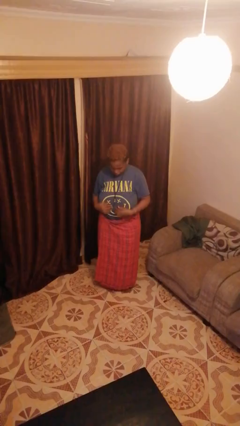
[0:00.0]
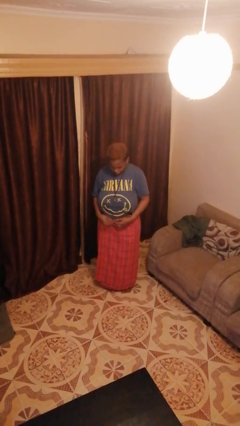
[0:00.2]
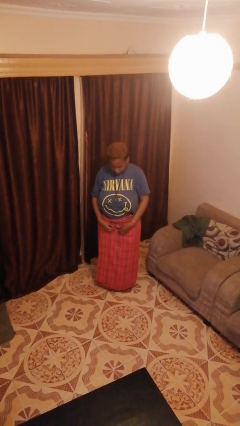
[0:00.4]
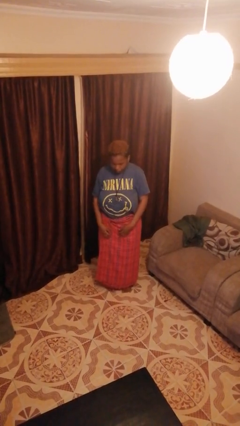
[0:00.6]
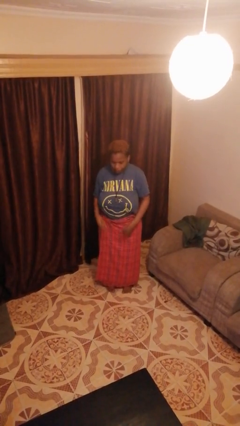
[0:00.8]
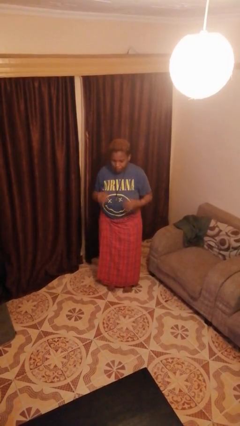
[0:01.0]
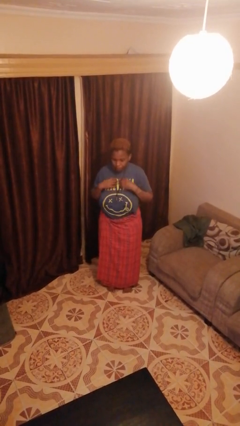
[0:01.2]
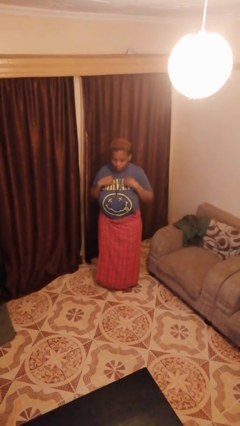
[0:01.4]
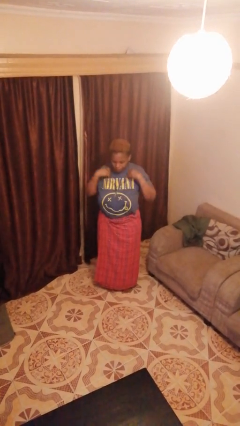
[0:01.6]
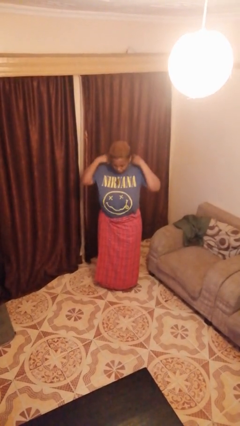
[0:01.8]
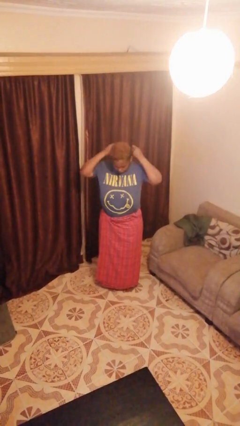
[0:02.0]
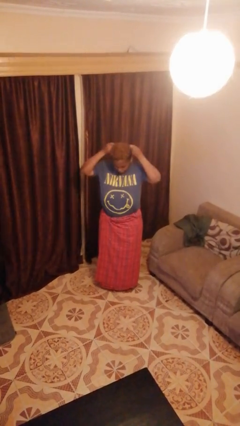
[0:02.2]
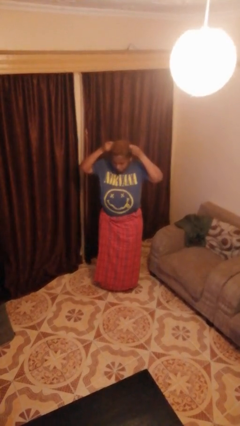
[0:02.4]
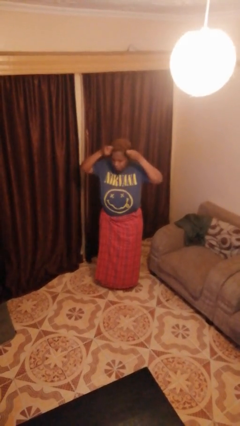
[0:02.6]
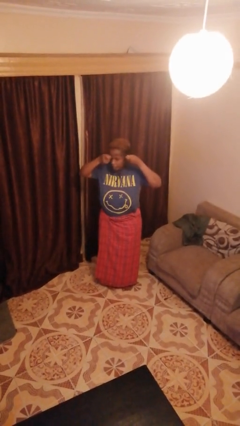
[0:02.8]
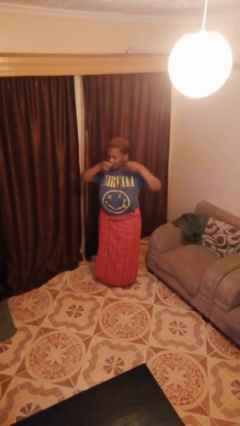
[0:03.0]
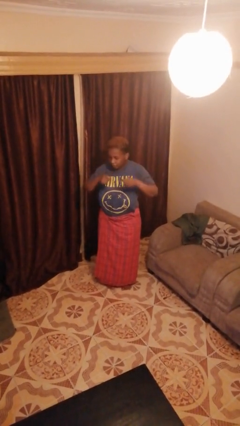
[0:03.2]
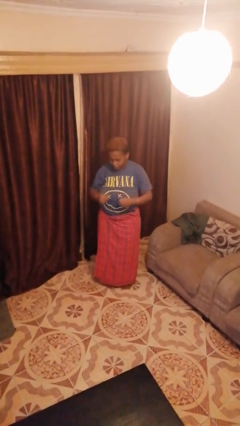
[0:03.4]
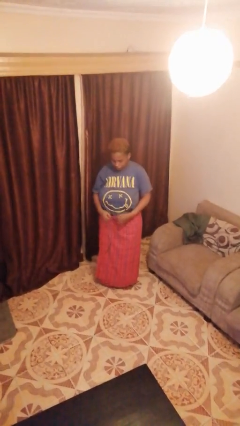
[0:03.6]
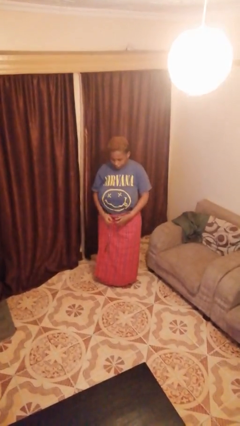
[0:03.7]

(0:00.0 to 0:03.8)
person takes off necklace

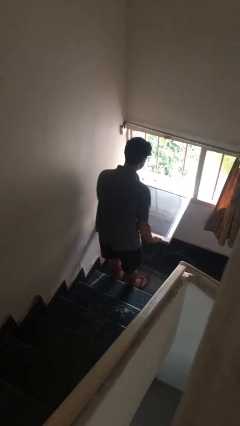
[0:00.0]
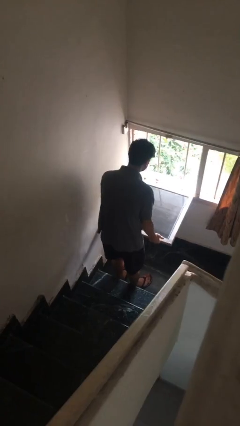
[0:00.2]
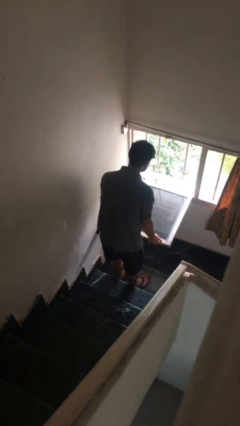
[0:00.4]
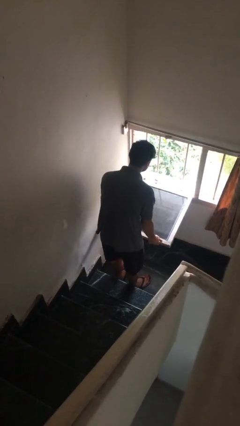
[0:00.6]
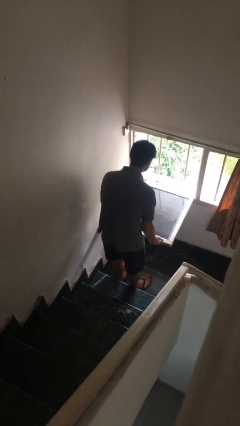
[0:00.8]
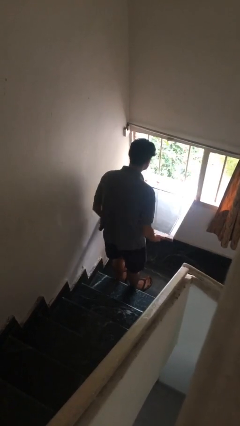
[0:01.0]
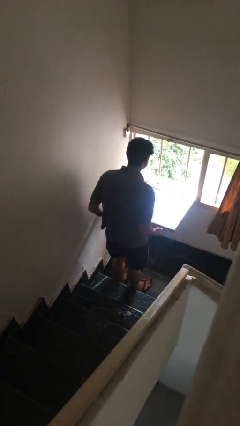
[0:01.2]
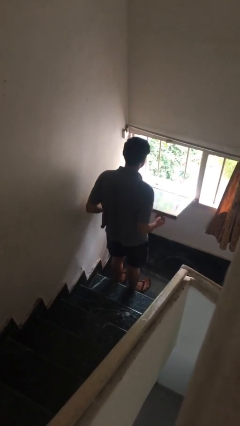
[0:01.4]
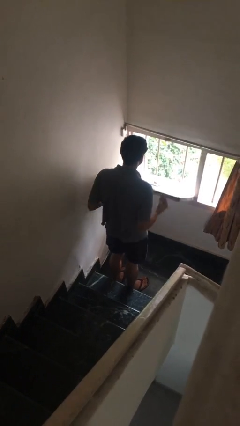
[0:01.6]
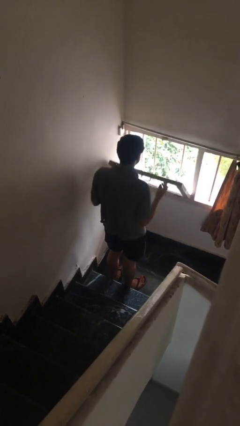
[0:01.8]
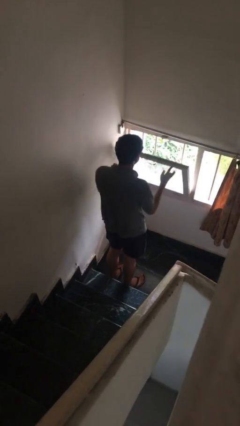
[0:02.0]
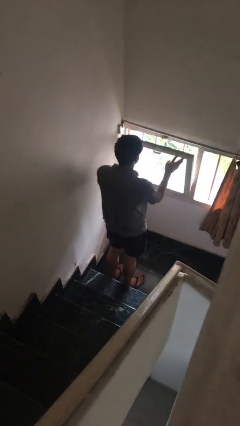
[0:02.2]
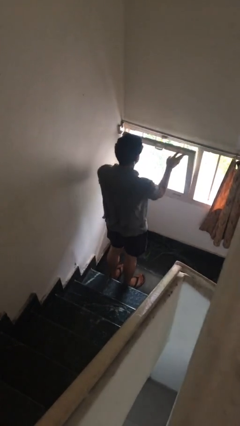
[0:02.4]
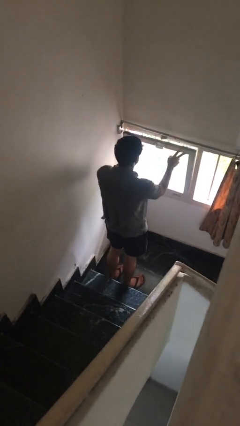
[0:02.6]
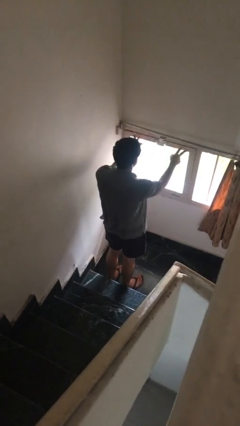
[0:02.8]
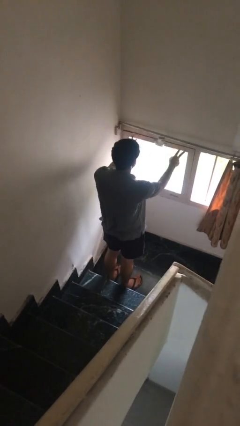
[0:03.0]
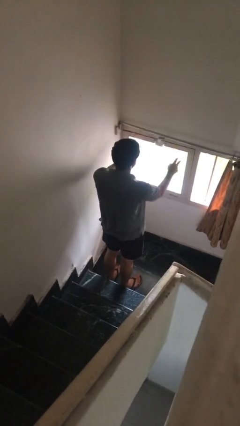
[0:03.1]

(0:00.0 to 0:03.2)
person closes home window

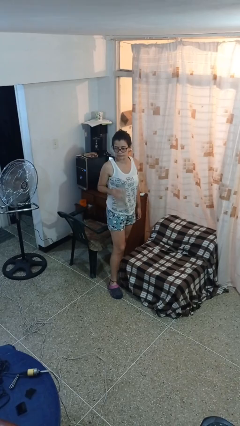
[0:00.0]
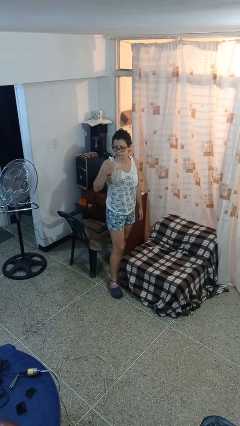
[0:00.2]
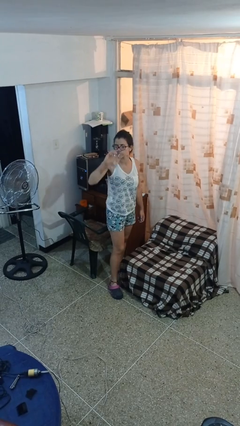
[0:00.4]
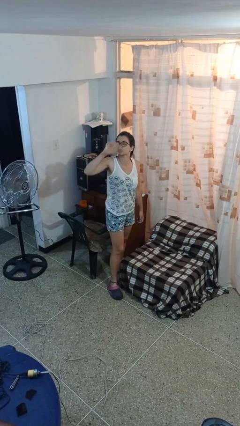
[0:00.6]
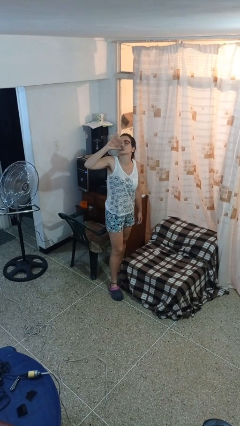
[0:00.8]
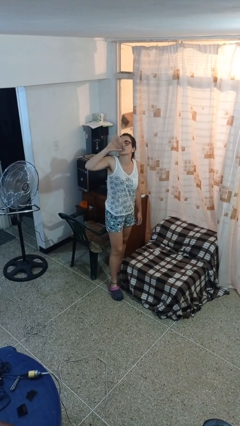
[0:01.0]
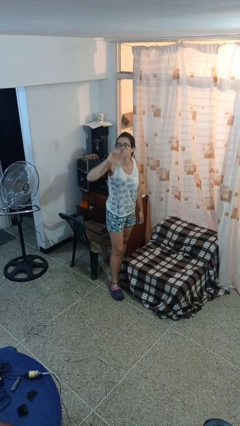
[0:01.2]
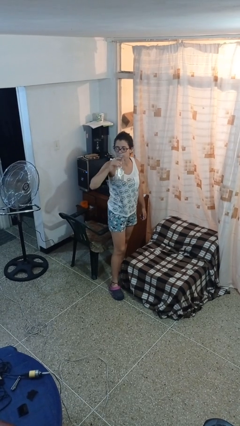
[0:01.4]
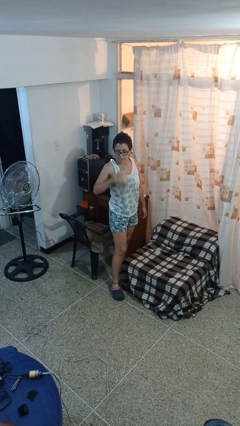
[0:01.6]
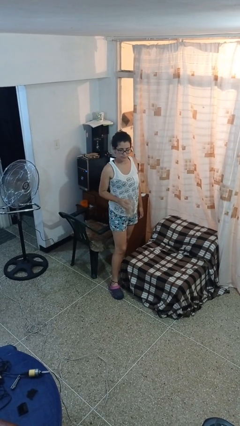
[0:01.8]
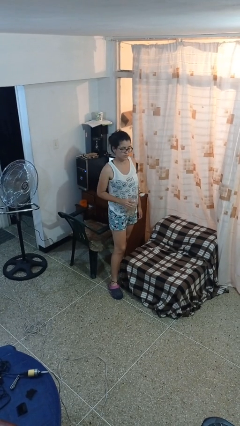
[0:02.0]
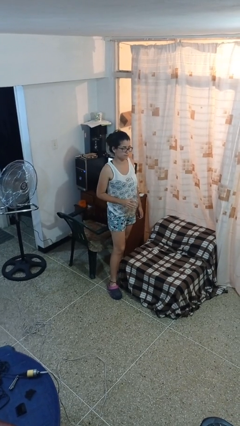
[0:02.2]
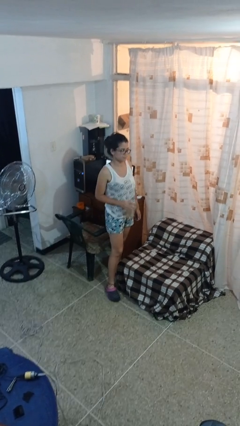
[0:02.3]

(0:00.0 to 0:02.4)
person drinks from bottle

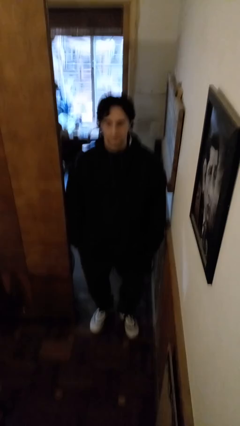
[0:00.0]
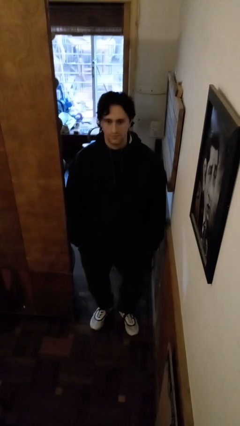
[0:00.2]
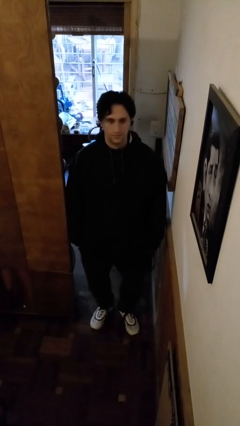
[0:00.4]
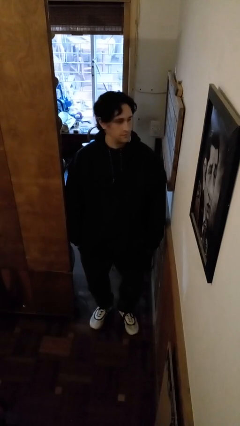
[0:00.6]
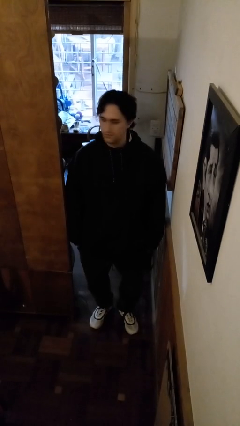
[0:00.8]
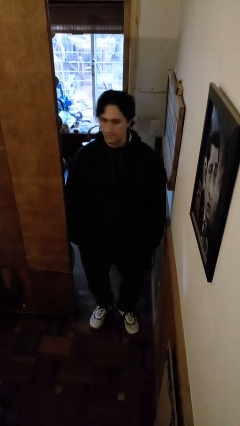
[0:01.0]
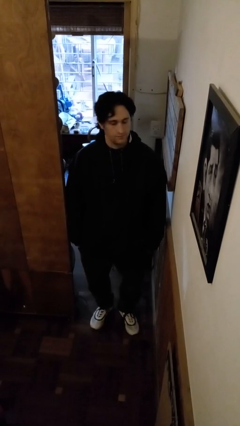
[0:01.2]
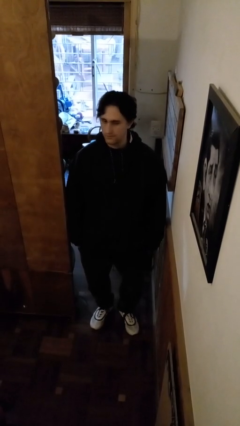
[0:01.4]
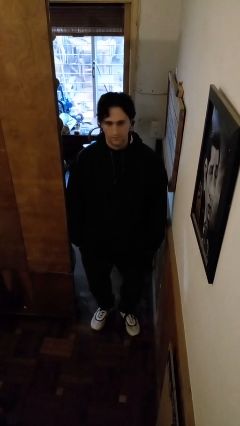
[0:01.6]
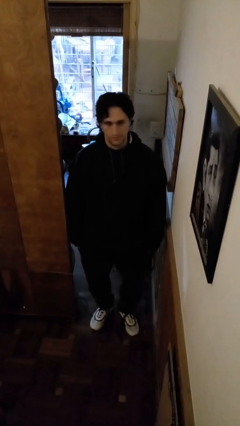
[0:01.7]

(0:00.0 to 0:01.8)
person shakes head

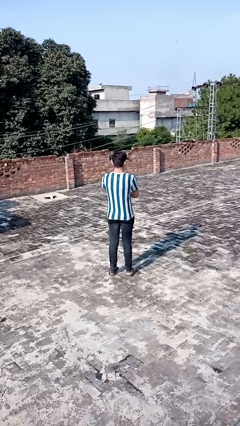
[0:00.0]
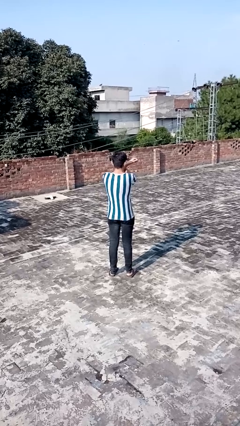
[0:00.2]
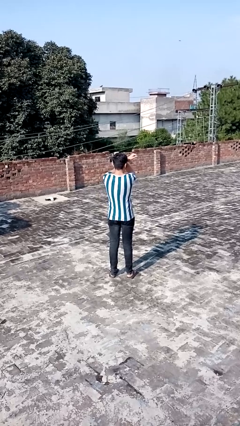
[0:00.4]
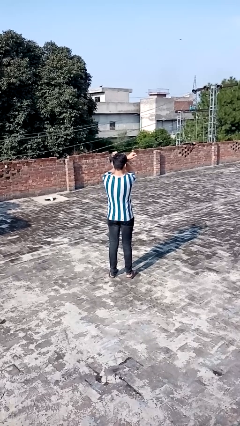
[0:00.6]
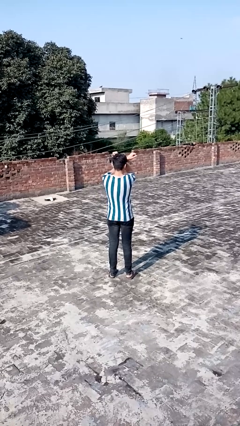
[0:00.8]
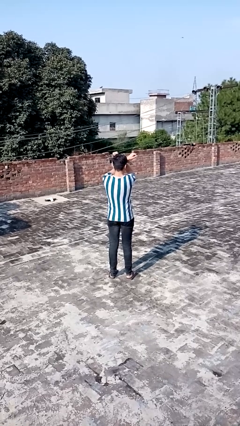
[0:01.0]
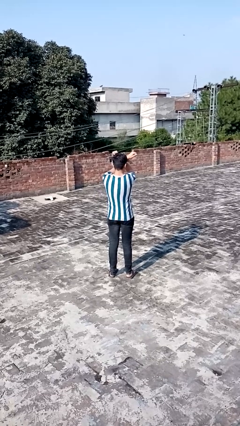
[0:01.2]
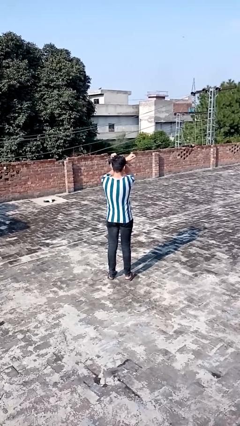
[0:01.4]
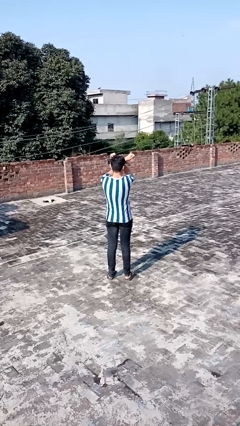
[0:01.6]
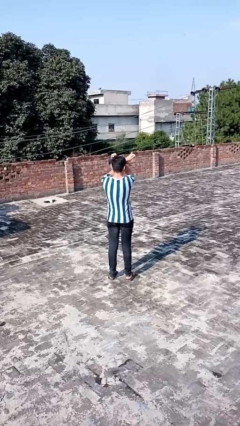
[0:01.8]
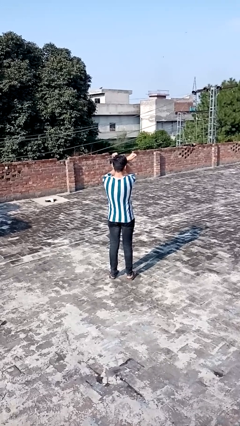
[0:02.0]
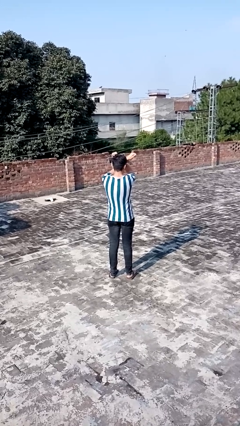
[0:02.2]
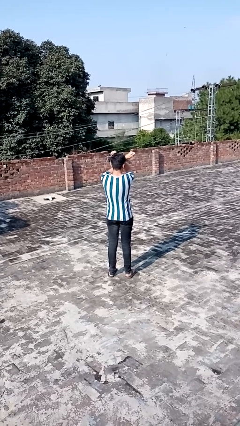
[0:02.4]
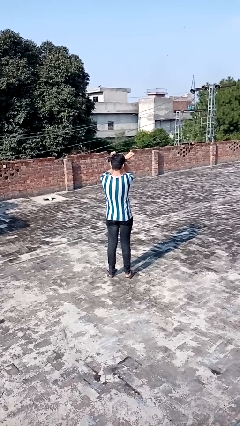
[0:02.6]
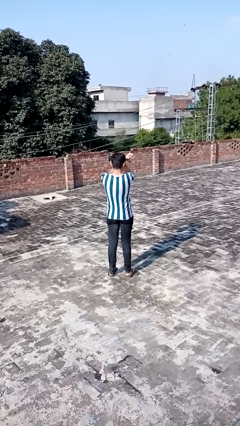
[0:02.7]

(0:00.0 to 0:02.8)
person gestures arms x

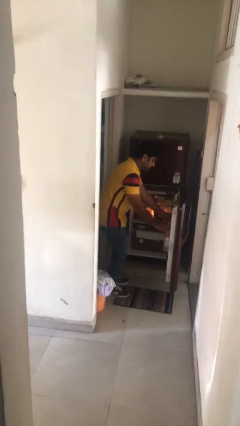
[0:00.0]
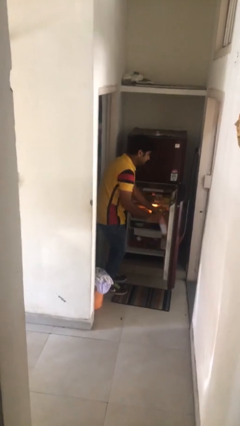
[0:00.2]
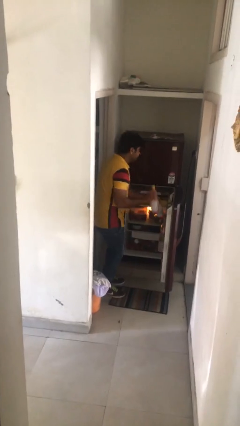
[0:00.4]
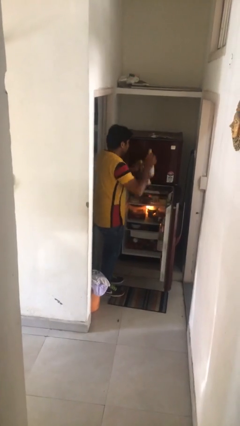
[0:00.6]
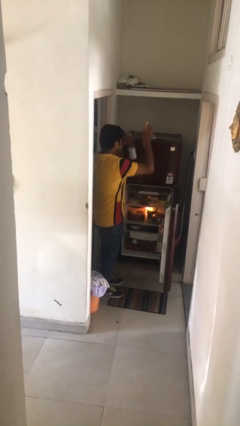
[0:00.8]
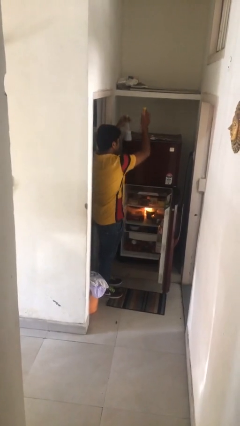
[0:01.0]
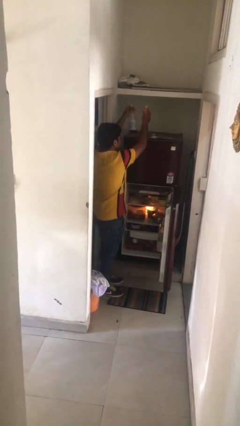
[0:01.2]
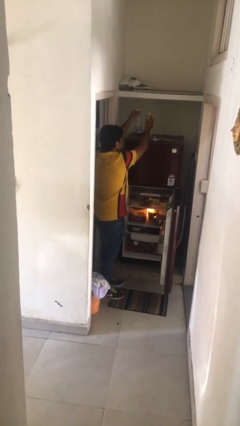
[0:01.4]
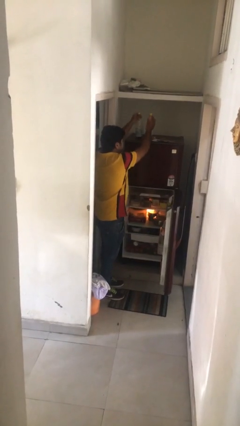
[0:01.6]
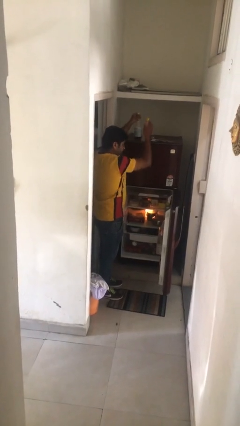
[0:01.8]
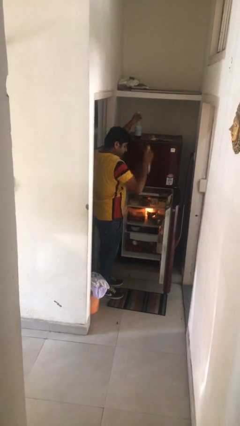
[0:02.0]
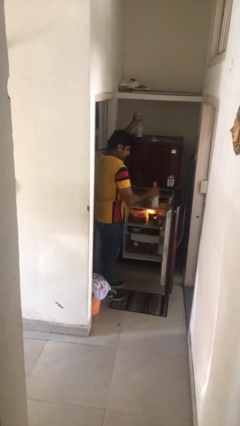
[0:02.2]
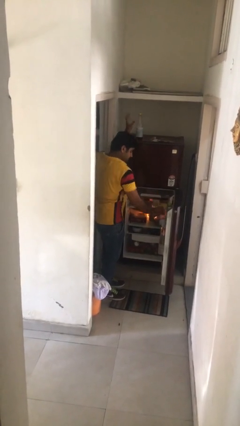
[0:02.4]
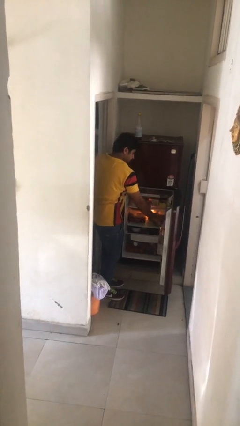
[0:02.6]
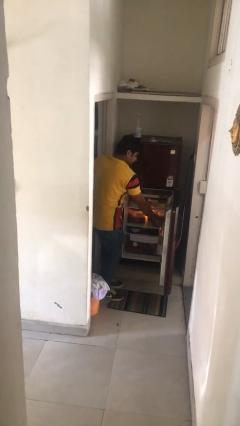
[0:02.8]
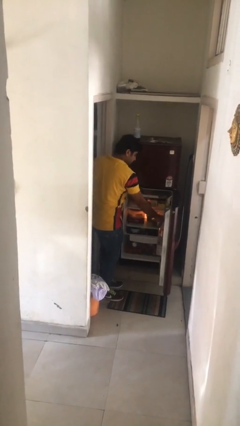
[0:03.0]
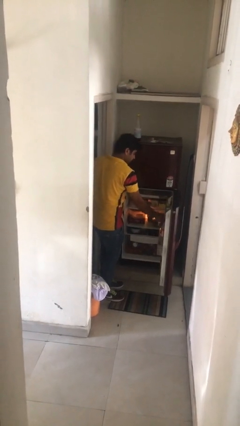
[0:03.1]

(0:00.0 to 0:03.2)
person loads groceries into refrigerator
